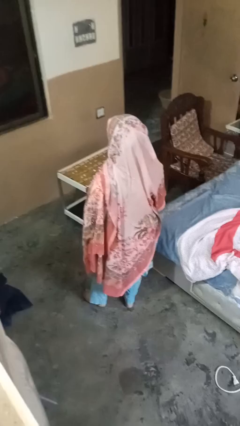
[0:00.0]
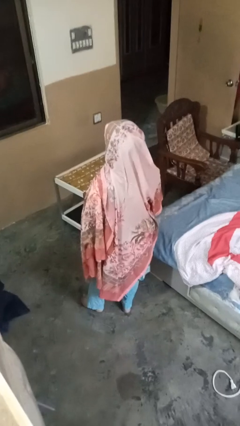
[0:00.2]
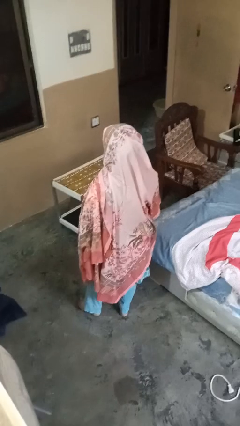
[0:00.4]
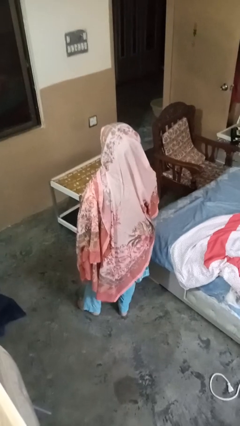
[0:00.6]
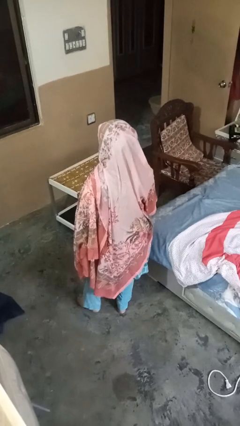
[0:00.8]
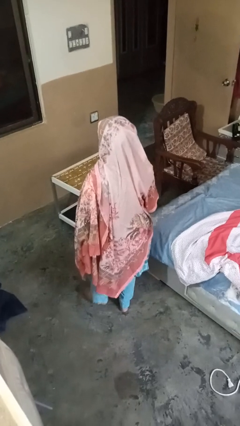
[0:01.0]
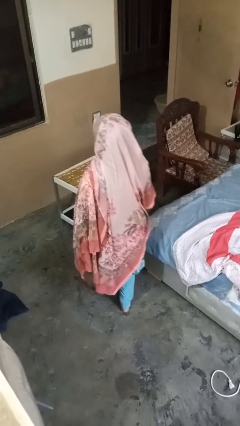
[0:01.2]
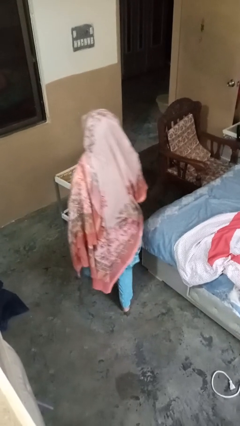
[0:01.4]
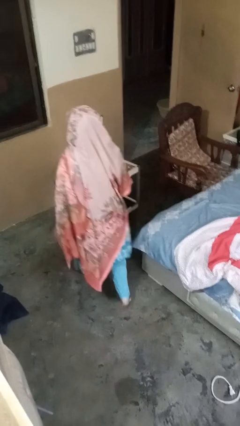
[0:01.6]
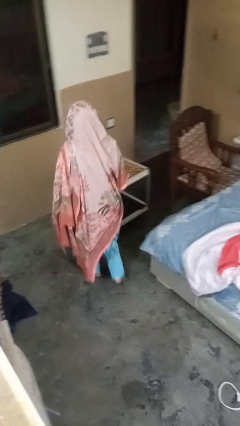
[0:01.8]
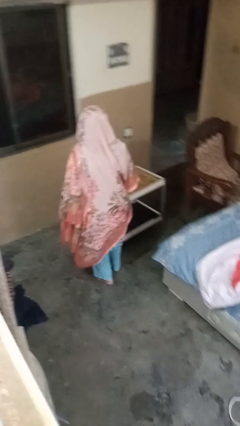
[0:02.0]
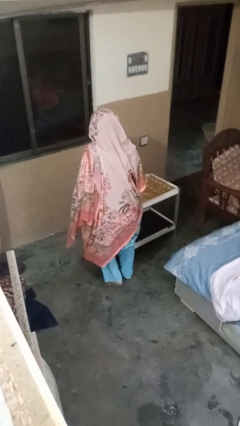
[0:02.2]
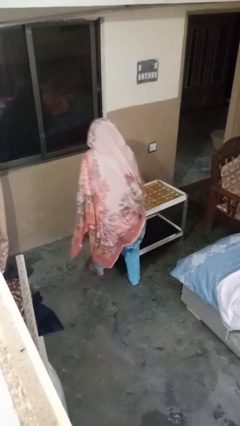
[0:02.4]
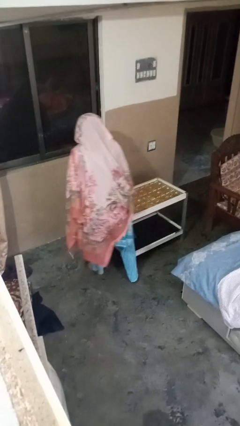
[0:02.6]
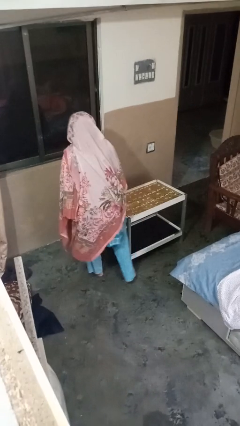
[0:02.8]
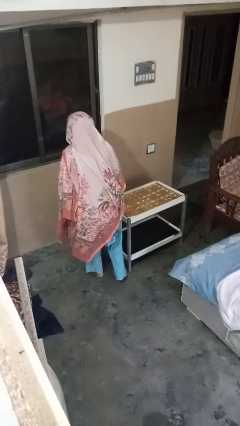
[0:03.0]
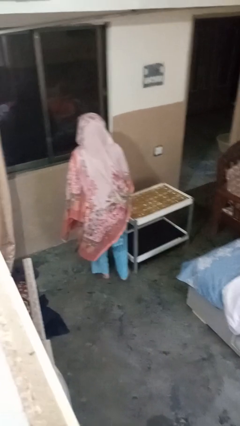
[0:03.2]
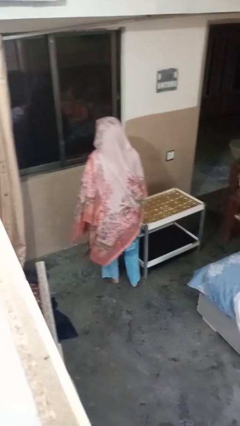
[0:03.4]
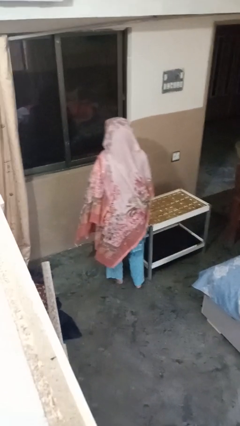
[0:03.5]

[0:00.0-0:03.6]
person bumps into table

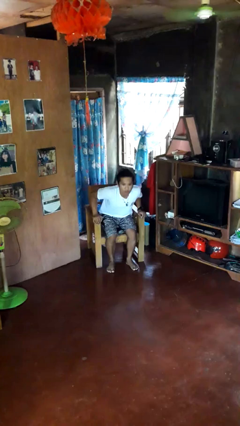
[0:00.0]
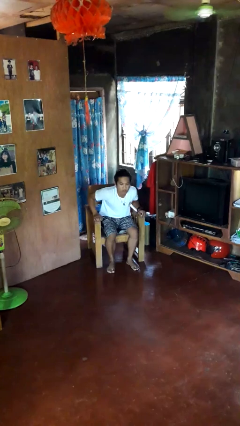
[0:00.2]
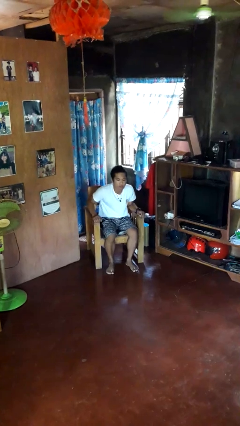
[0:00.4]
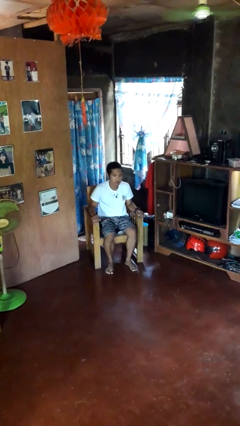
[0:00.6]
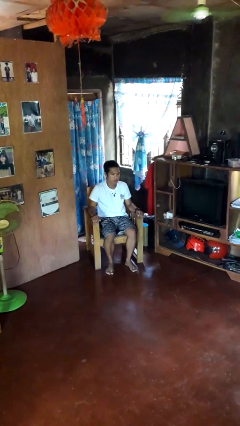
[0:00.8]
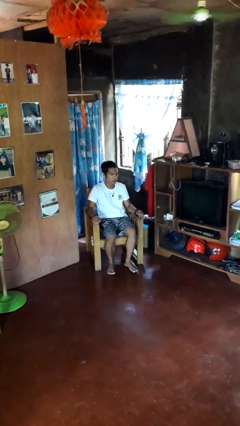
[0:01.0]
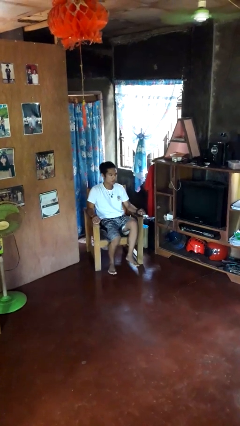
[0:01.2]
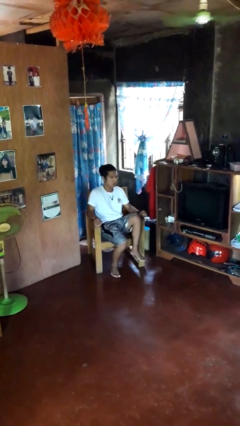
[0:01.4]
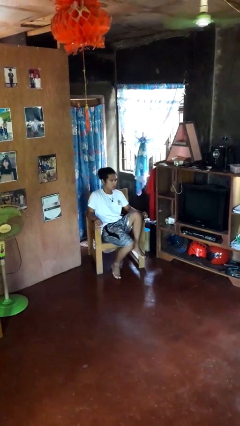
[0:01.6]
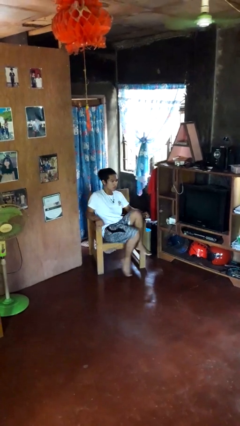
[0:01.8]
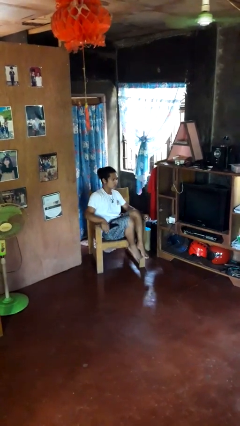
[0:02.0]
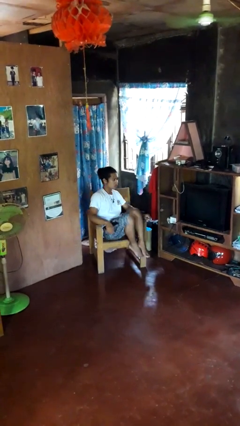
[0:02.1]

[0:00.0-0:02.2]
person sits down

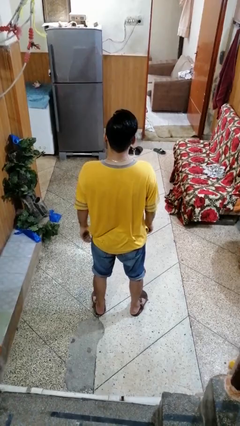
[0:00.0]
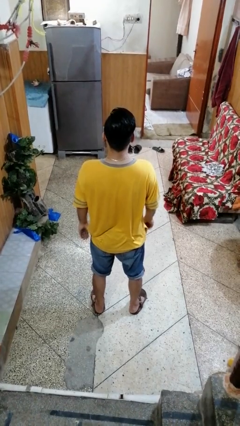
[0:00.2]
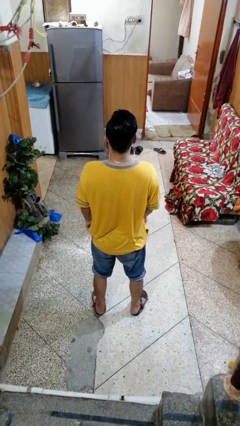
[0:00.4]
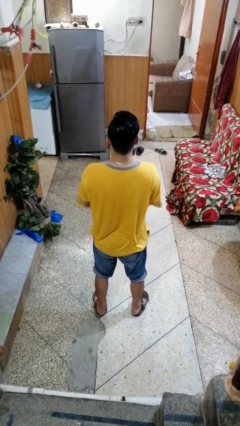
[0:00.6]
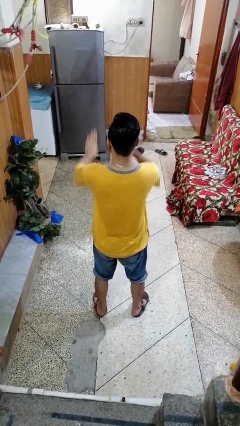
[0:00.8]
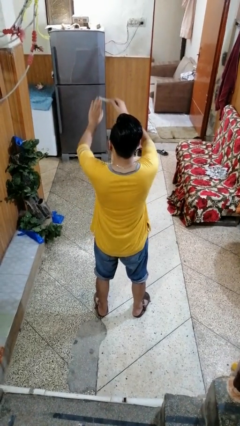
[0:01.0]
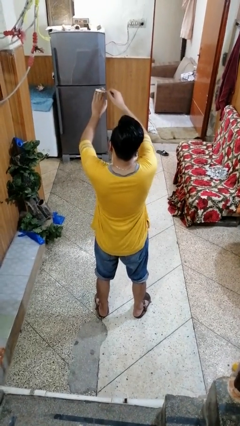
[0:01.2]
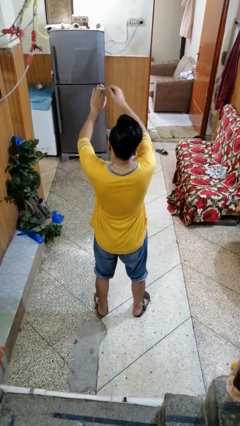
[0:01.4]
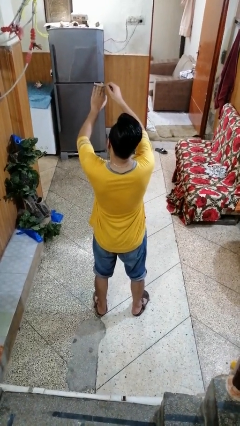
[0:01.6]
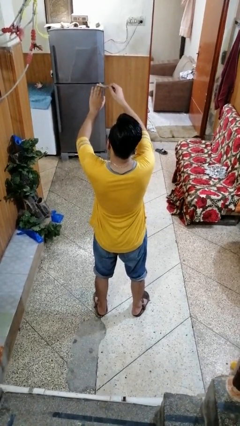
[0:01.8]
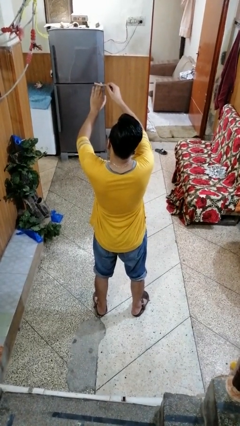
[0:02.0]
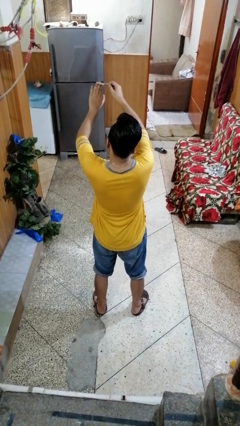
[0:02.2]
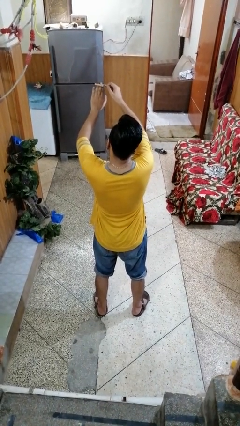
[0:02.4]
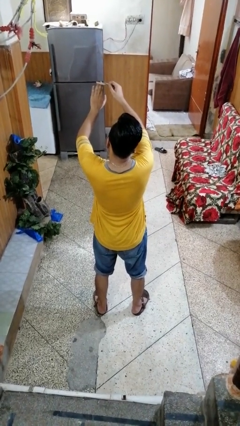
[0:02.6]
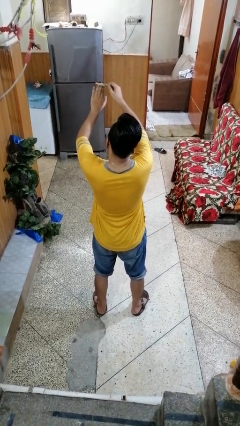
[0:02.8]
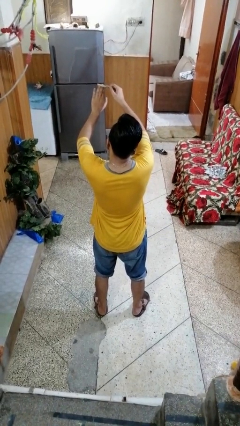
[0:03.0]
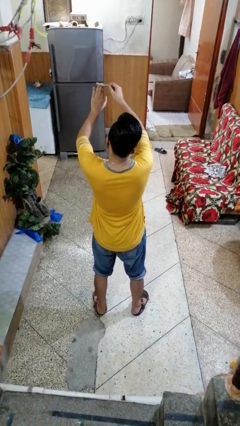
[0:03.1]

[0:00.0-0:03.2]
person files fingernails

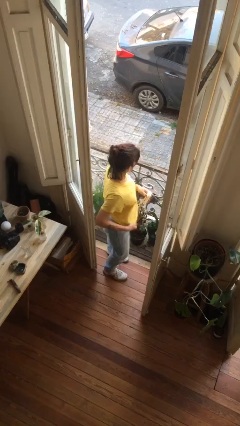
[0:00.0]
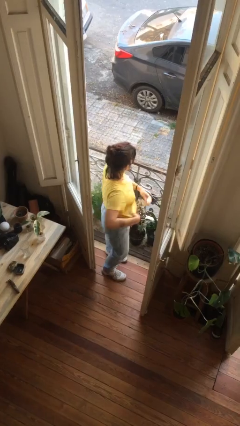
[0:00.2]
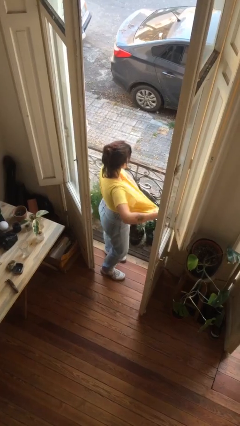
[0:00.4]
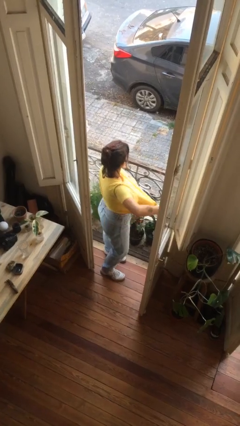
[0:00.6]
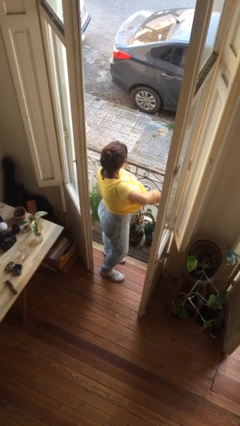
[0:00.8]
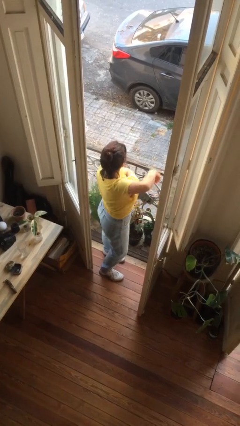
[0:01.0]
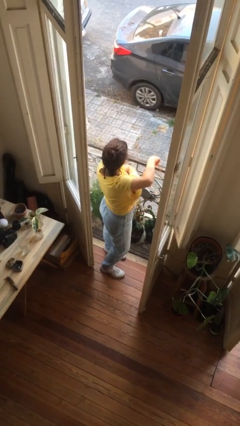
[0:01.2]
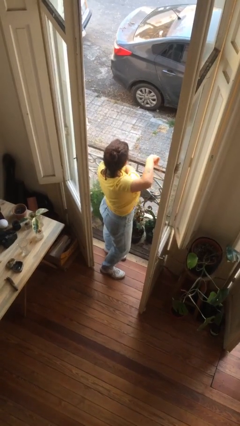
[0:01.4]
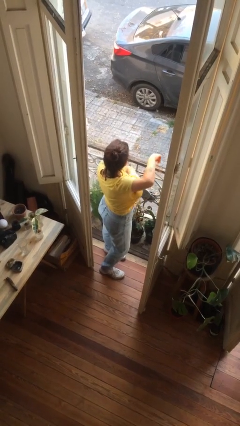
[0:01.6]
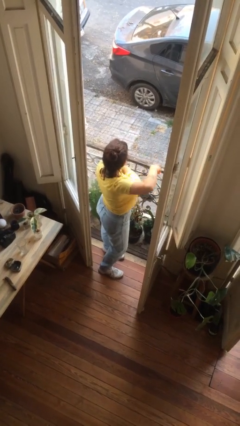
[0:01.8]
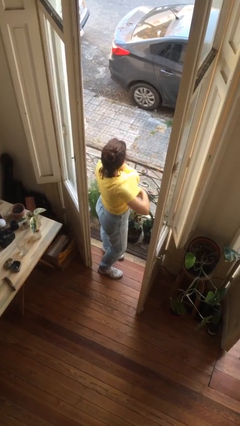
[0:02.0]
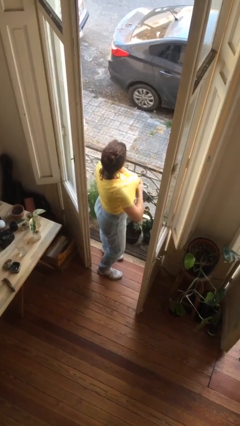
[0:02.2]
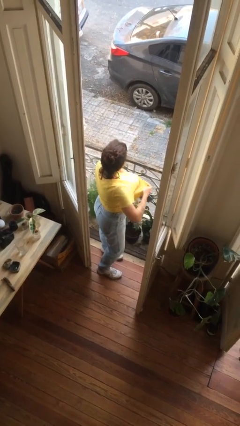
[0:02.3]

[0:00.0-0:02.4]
person applies deodorant

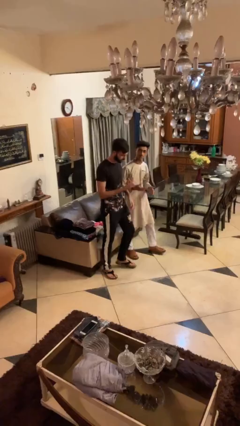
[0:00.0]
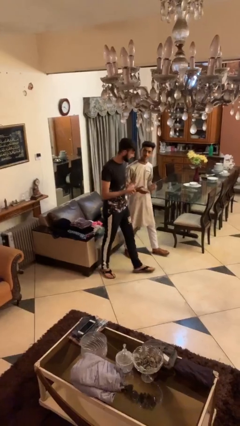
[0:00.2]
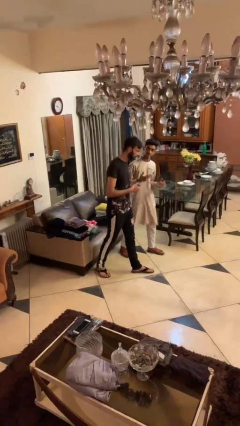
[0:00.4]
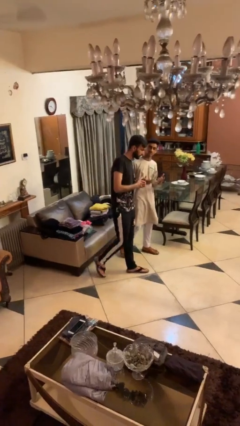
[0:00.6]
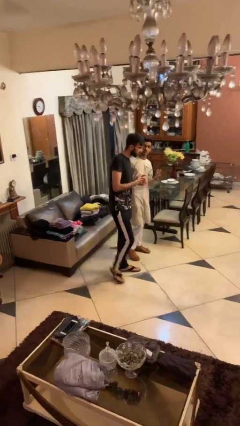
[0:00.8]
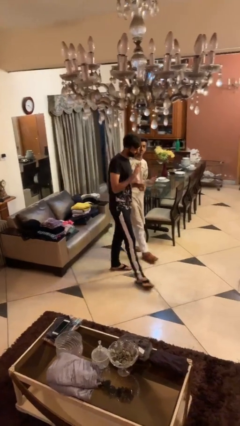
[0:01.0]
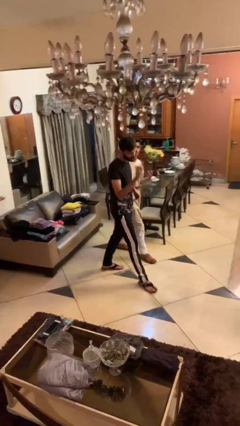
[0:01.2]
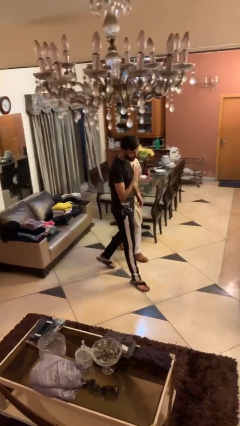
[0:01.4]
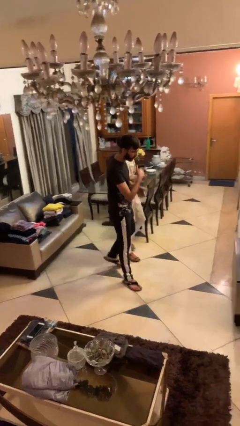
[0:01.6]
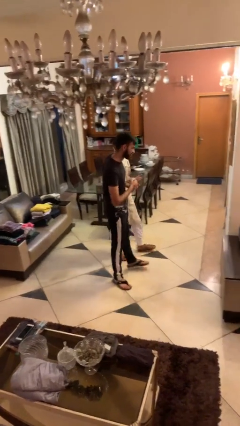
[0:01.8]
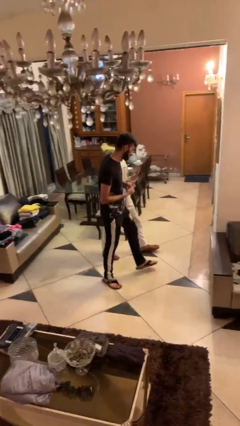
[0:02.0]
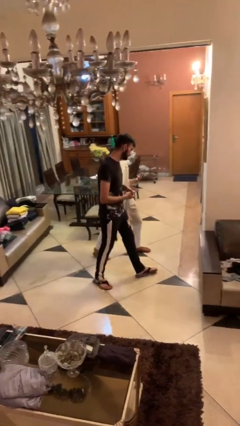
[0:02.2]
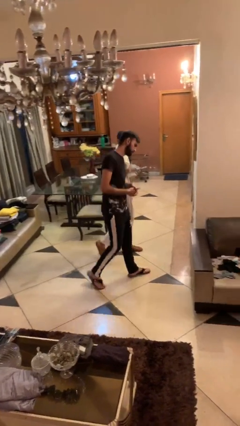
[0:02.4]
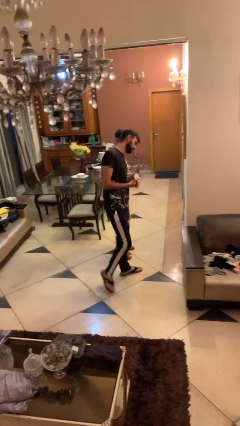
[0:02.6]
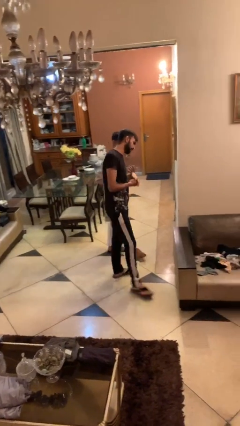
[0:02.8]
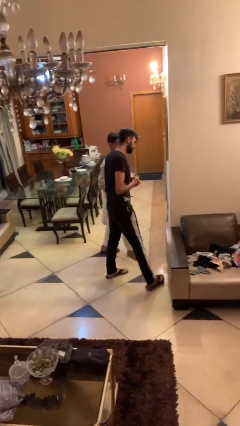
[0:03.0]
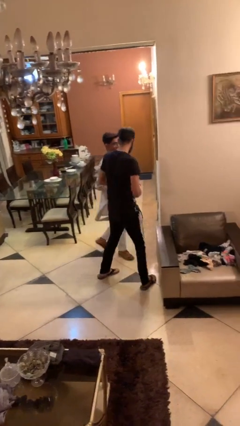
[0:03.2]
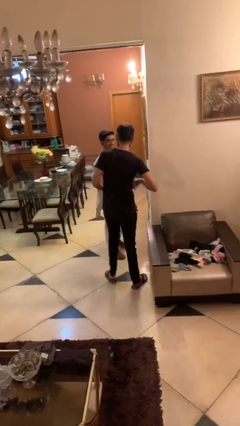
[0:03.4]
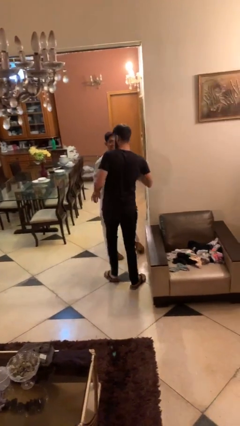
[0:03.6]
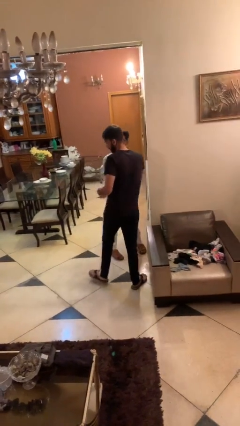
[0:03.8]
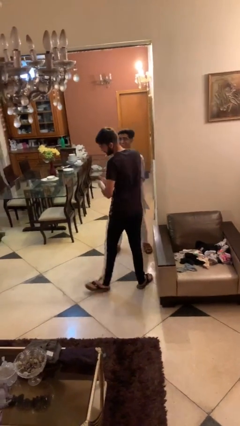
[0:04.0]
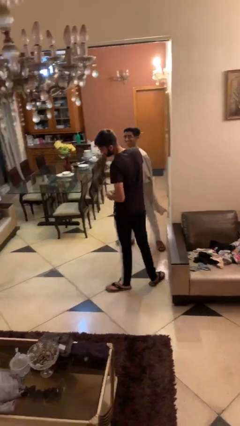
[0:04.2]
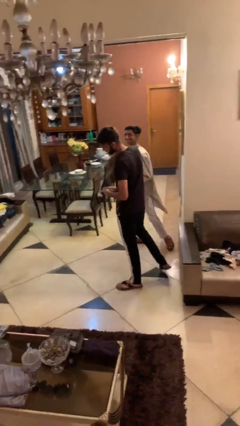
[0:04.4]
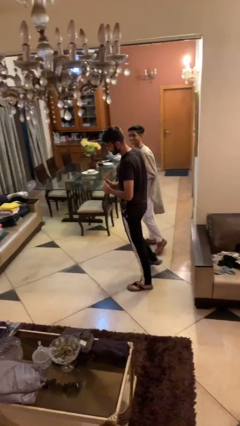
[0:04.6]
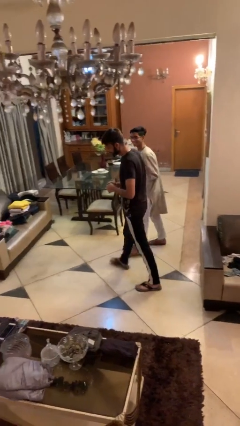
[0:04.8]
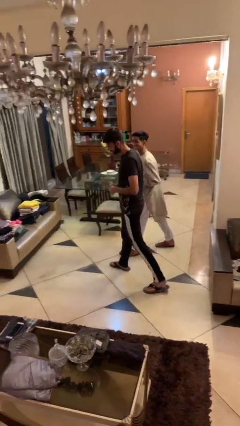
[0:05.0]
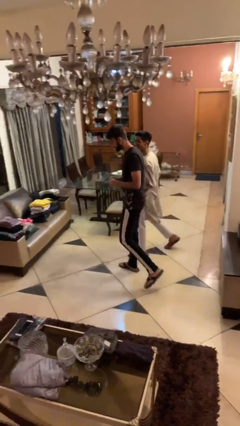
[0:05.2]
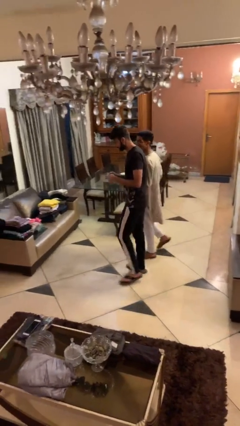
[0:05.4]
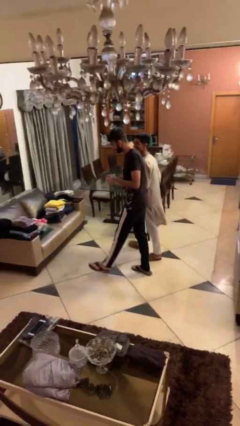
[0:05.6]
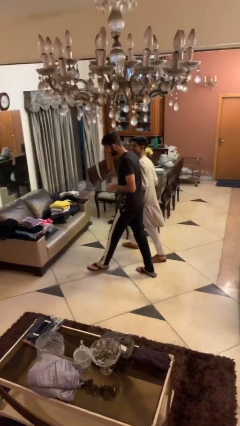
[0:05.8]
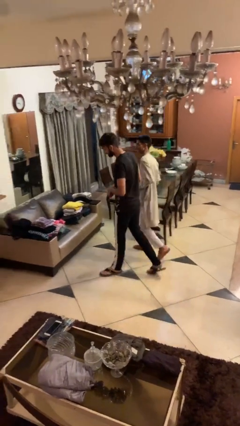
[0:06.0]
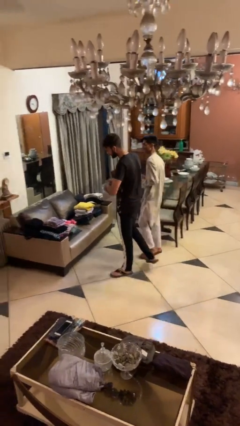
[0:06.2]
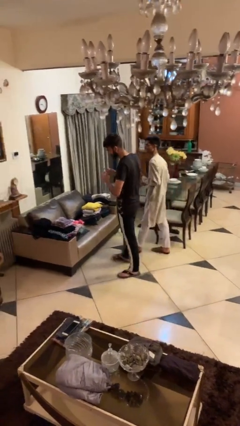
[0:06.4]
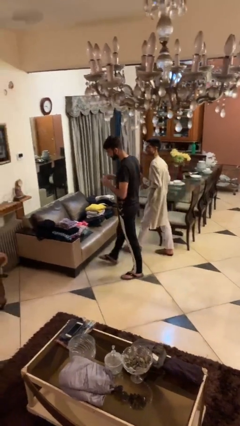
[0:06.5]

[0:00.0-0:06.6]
person talks to person
